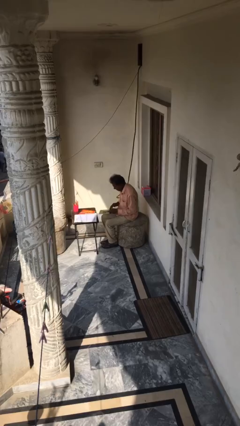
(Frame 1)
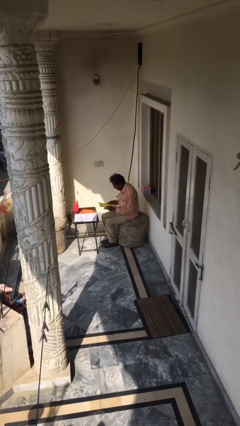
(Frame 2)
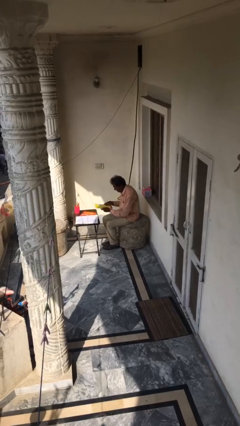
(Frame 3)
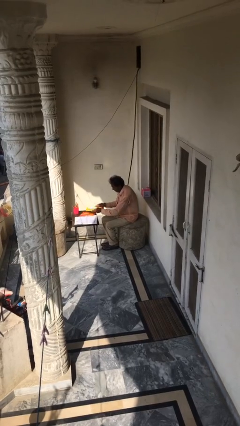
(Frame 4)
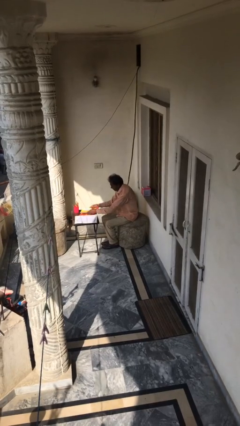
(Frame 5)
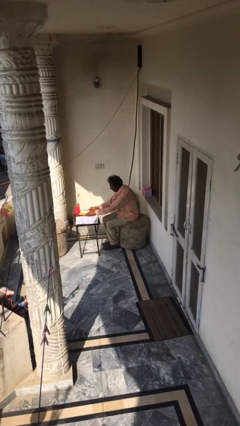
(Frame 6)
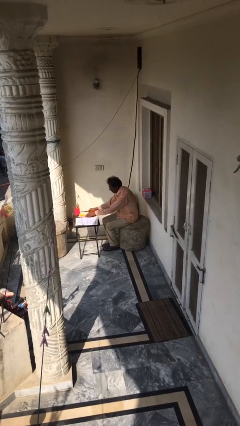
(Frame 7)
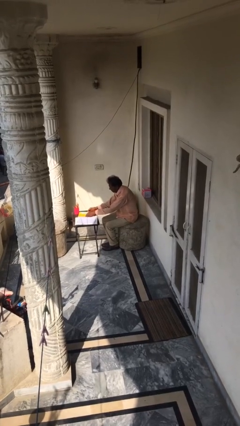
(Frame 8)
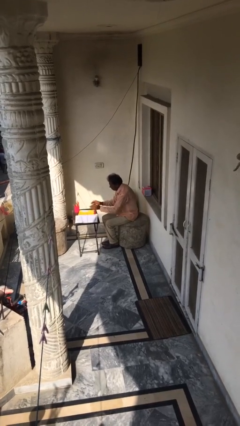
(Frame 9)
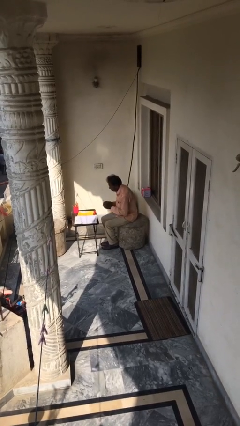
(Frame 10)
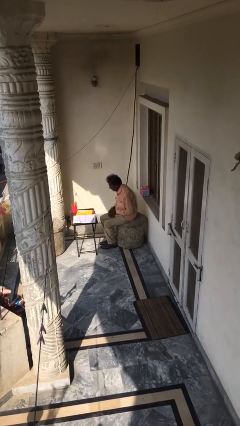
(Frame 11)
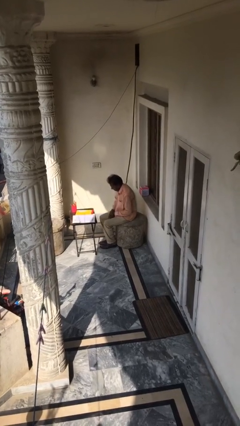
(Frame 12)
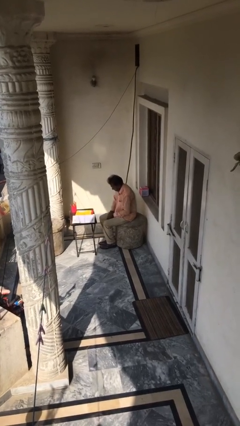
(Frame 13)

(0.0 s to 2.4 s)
person puts down object on table

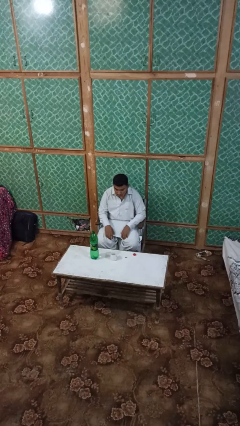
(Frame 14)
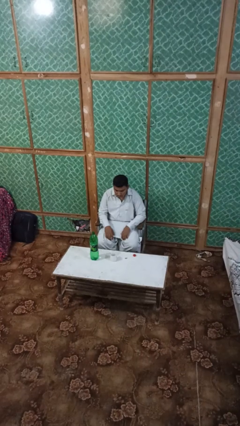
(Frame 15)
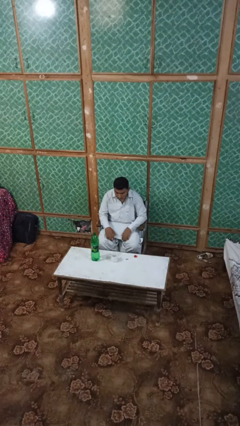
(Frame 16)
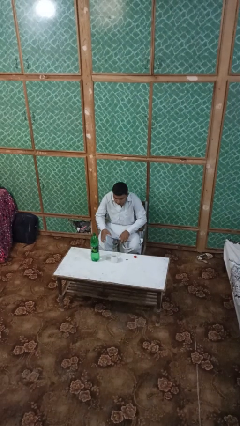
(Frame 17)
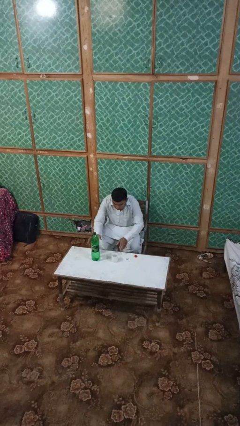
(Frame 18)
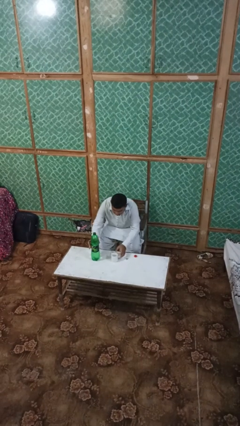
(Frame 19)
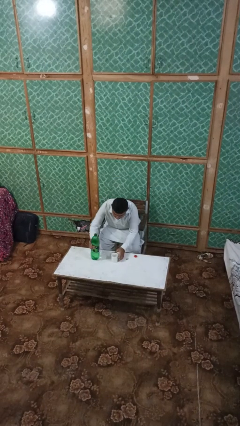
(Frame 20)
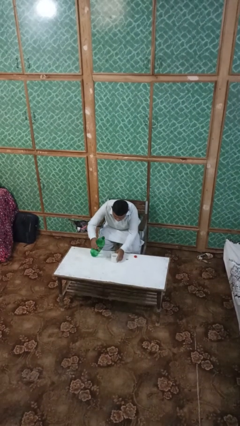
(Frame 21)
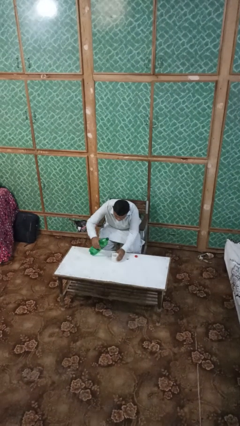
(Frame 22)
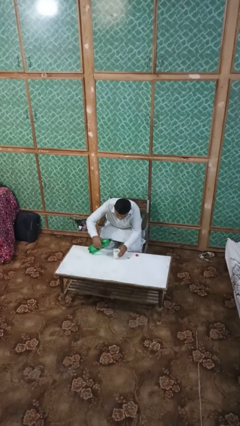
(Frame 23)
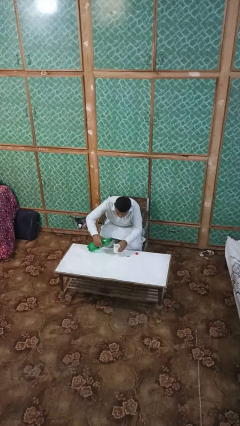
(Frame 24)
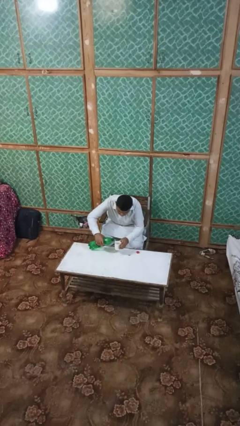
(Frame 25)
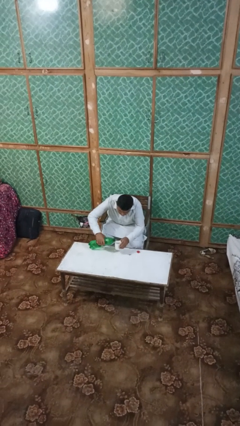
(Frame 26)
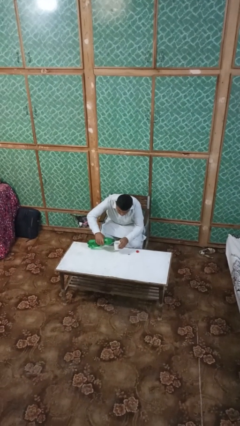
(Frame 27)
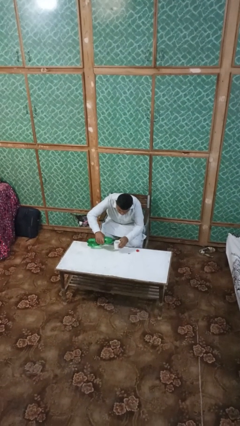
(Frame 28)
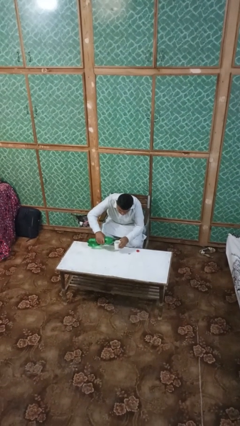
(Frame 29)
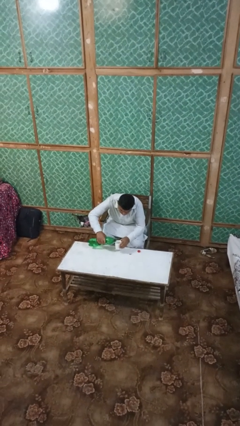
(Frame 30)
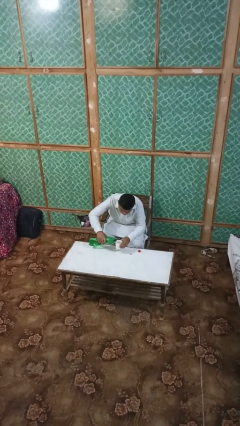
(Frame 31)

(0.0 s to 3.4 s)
person pours liquid into cup

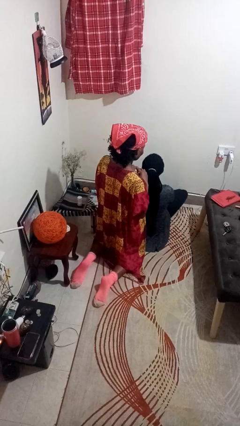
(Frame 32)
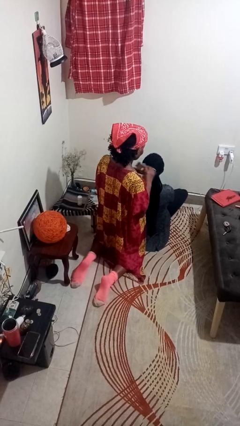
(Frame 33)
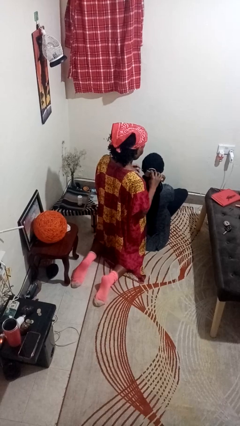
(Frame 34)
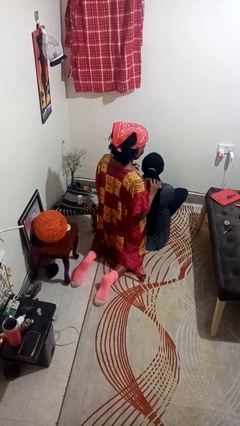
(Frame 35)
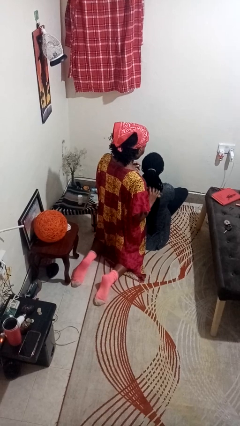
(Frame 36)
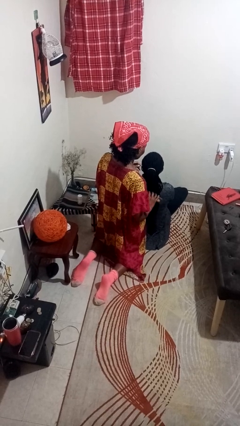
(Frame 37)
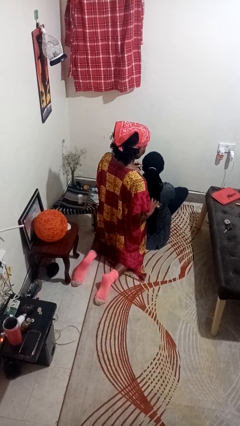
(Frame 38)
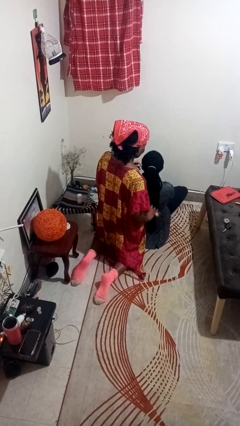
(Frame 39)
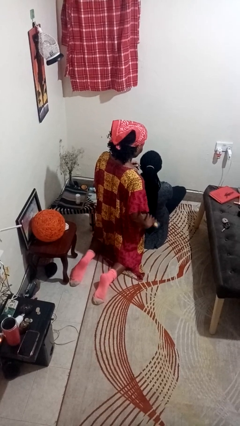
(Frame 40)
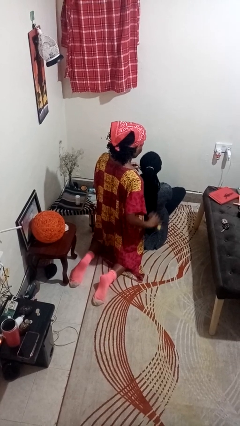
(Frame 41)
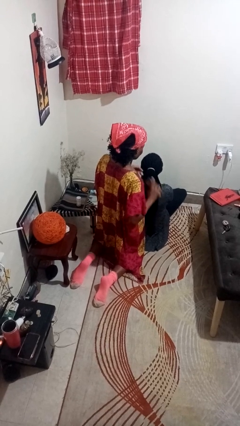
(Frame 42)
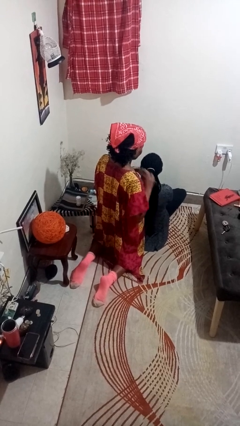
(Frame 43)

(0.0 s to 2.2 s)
person brushes hair of person

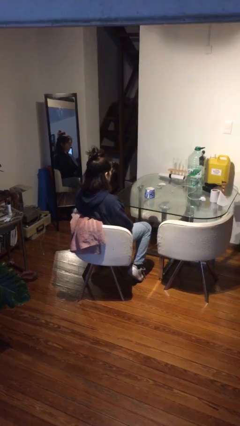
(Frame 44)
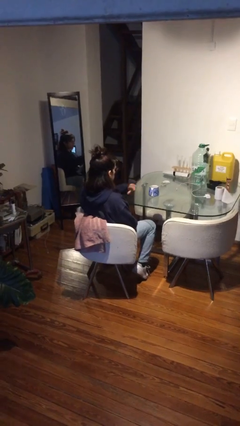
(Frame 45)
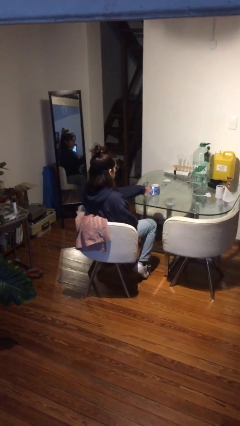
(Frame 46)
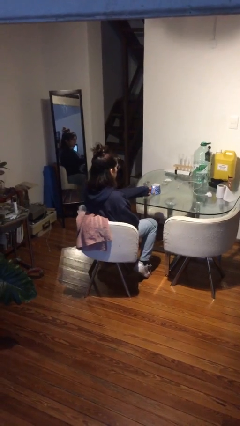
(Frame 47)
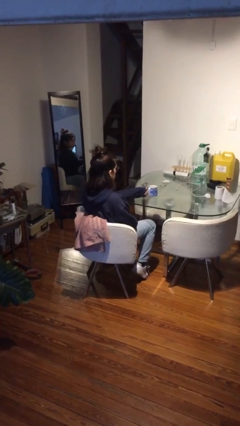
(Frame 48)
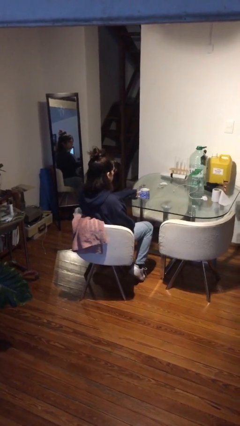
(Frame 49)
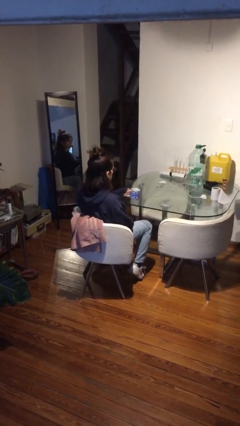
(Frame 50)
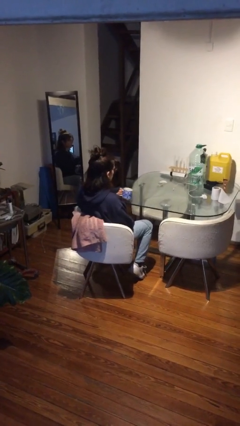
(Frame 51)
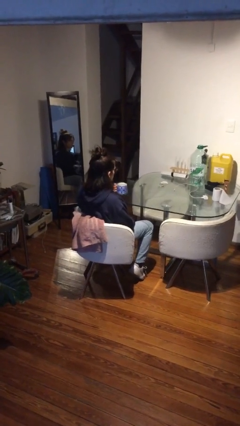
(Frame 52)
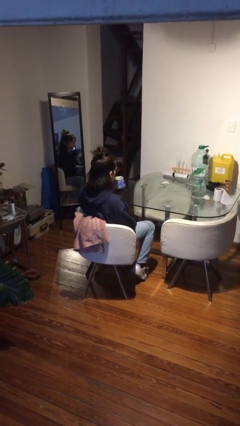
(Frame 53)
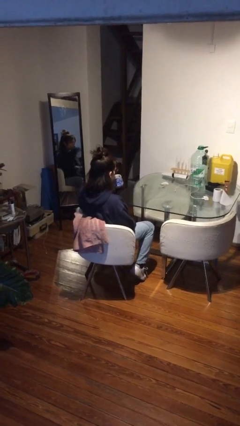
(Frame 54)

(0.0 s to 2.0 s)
person picks up object from table

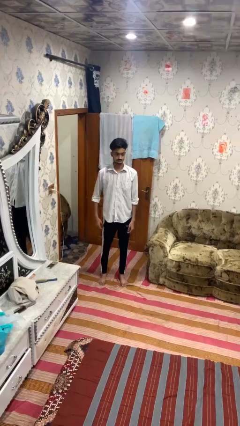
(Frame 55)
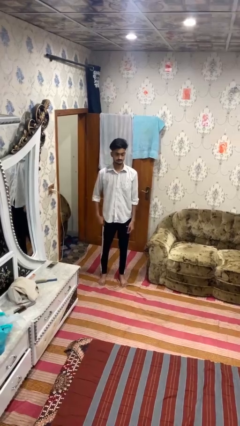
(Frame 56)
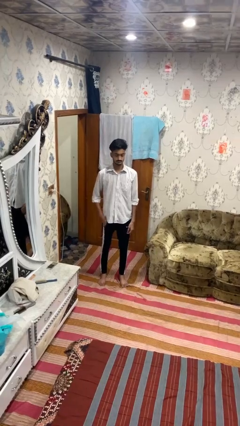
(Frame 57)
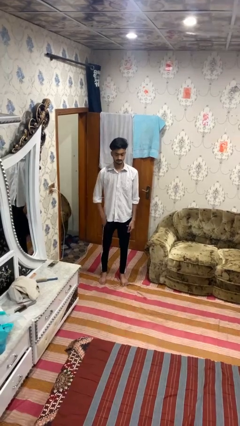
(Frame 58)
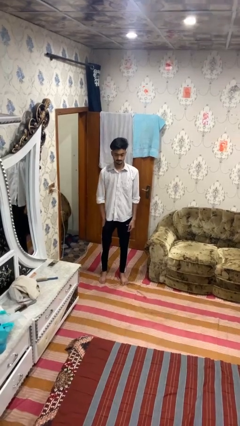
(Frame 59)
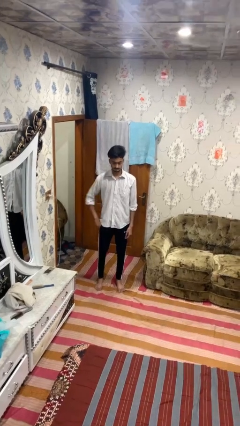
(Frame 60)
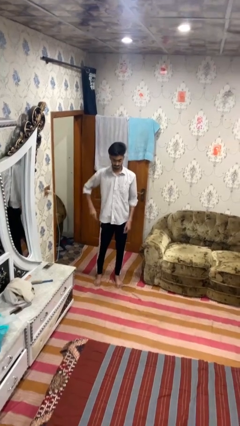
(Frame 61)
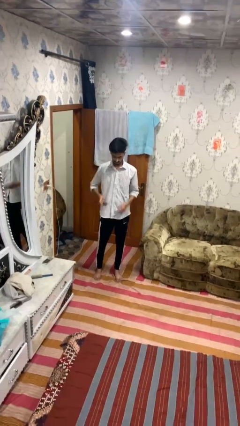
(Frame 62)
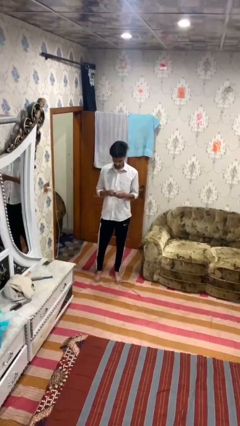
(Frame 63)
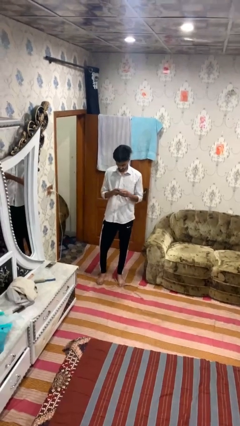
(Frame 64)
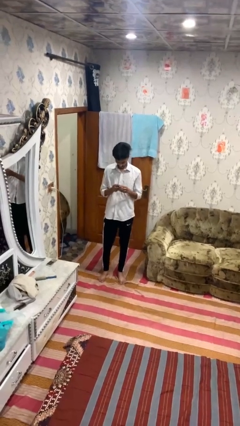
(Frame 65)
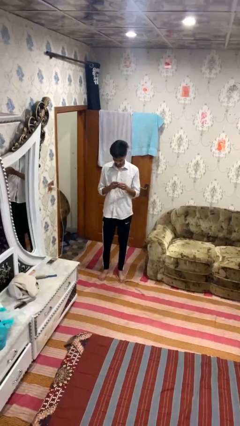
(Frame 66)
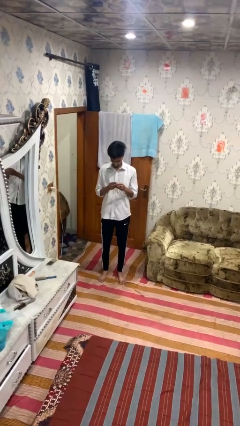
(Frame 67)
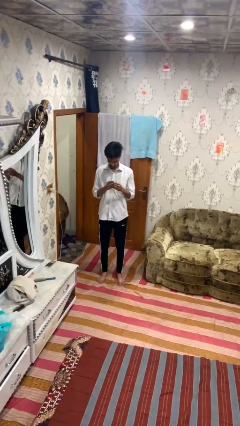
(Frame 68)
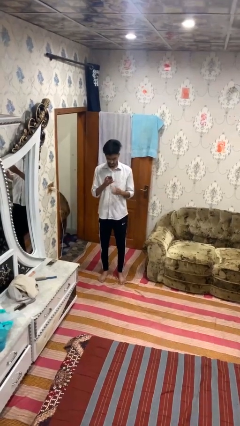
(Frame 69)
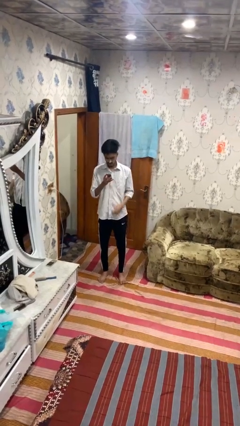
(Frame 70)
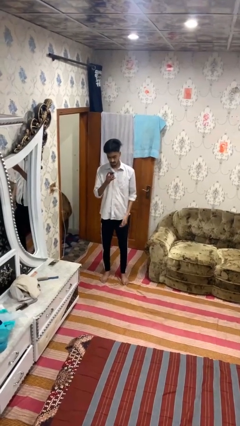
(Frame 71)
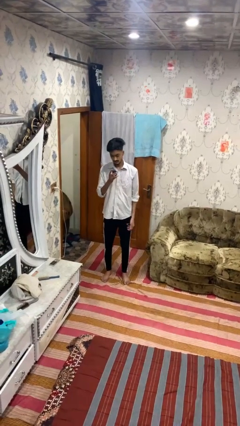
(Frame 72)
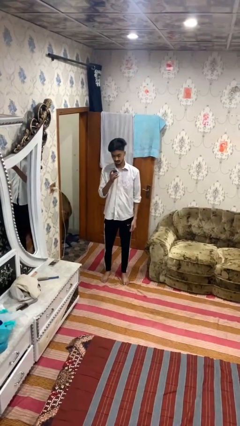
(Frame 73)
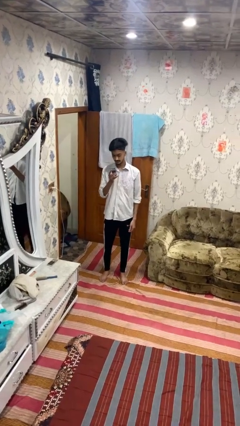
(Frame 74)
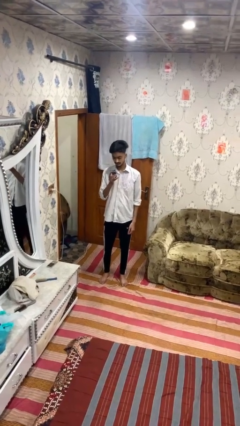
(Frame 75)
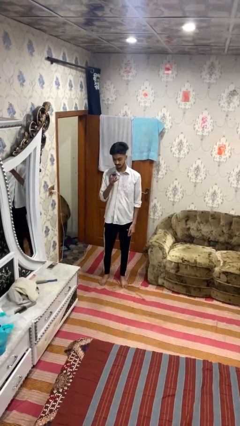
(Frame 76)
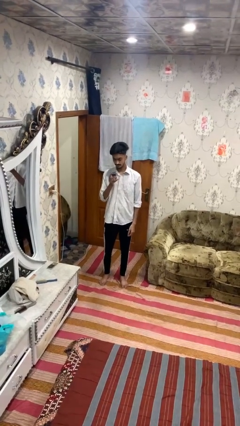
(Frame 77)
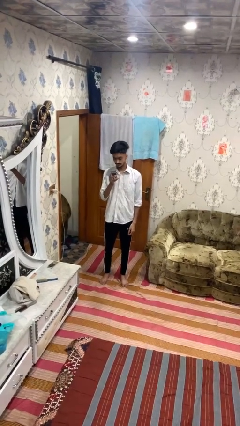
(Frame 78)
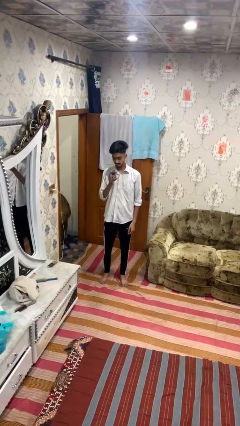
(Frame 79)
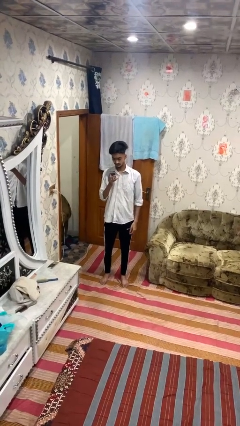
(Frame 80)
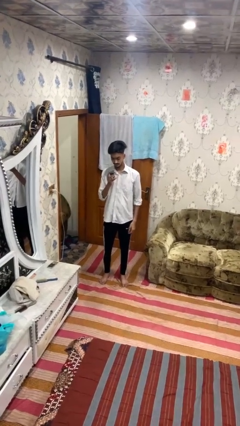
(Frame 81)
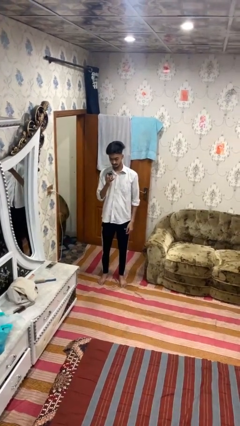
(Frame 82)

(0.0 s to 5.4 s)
person takes phone from pocket

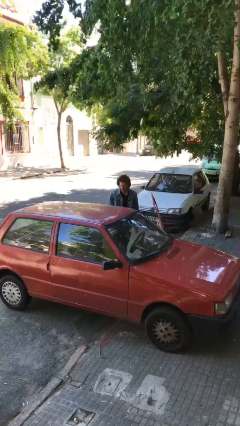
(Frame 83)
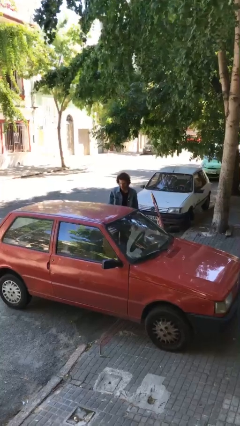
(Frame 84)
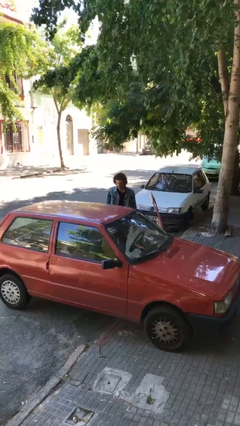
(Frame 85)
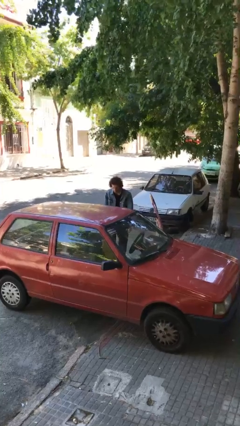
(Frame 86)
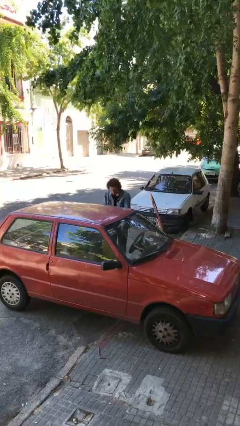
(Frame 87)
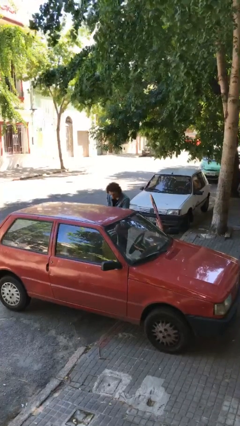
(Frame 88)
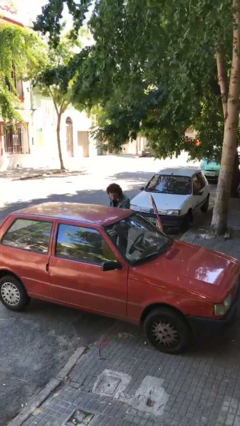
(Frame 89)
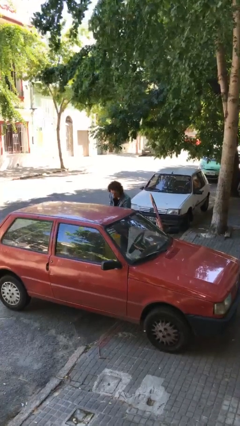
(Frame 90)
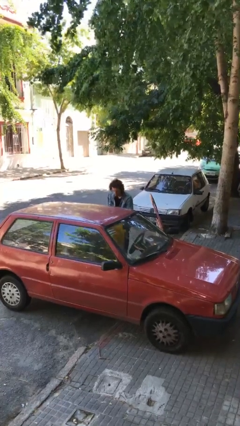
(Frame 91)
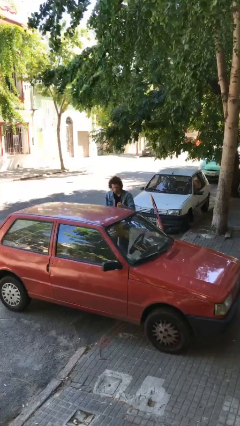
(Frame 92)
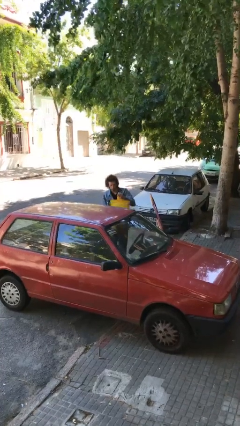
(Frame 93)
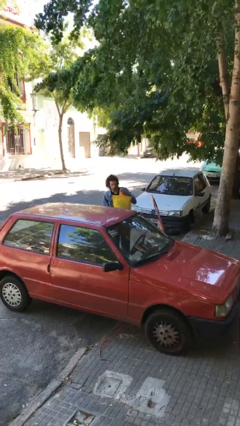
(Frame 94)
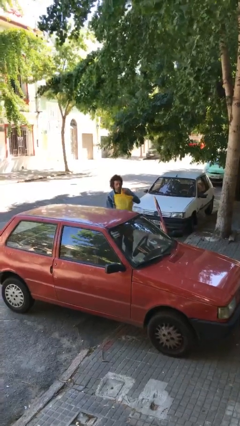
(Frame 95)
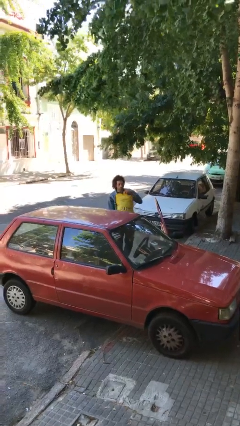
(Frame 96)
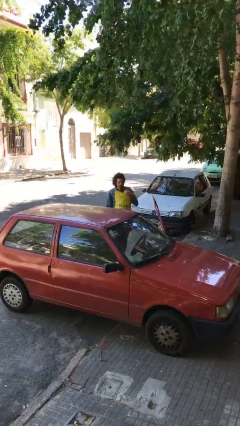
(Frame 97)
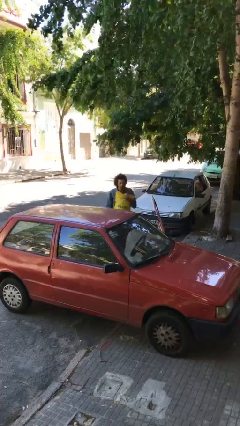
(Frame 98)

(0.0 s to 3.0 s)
person unloads car
